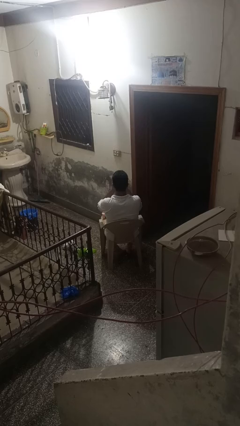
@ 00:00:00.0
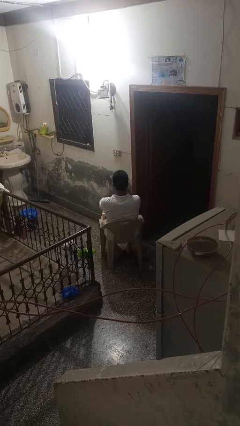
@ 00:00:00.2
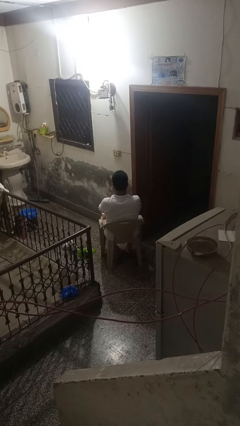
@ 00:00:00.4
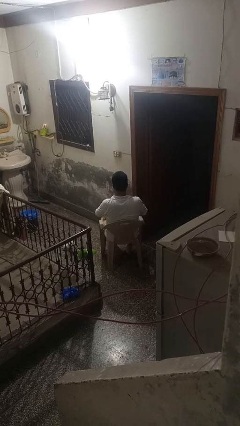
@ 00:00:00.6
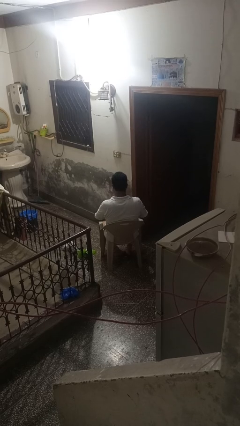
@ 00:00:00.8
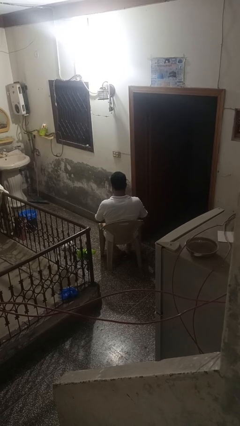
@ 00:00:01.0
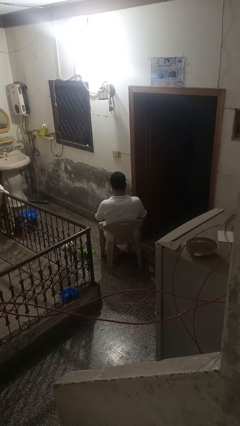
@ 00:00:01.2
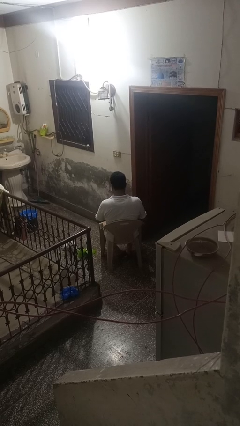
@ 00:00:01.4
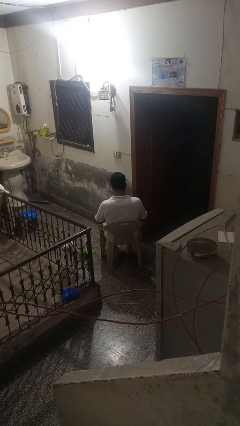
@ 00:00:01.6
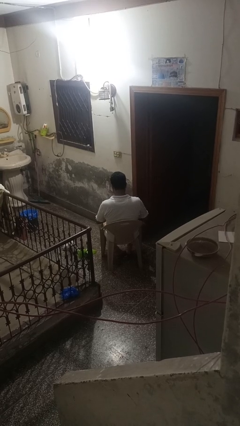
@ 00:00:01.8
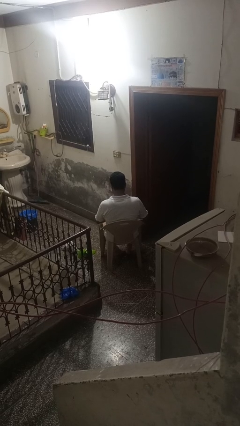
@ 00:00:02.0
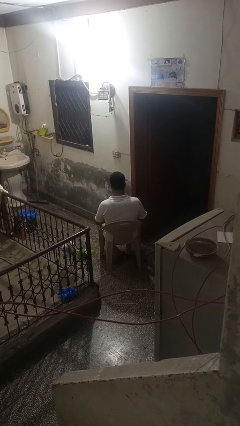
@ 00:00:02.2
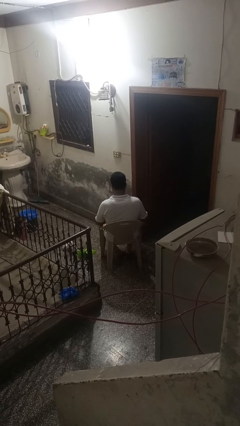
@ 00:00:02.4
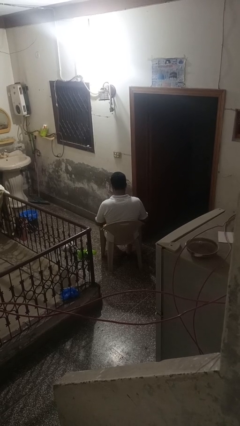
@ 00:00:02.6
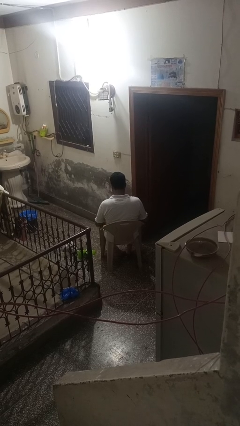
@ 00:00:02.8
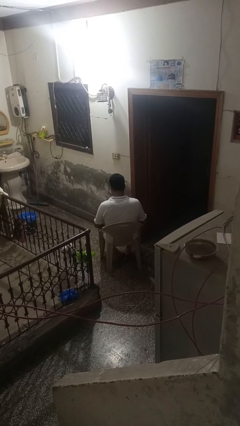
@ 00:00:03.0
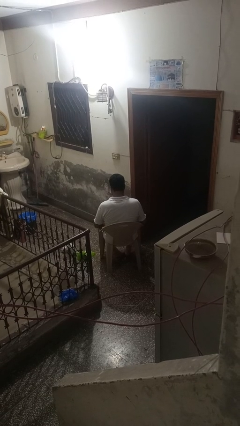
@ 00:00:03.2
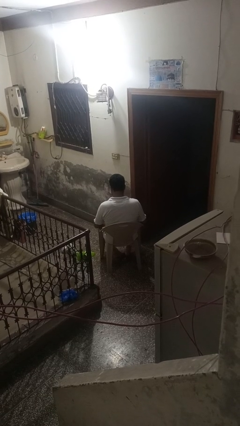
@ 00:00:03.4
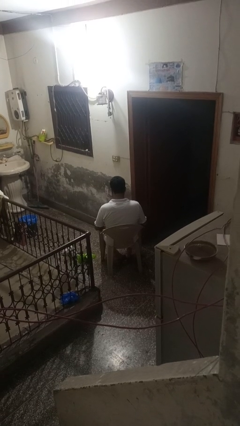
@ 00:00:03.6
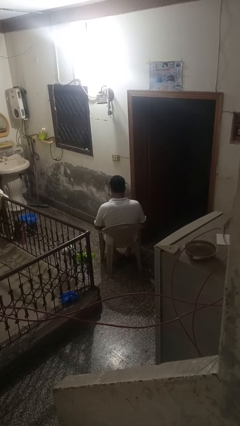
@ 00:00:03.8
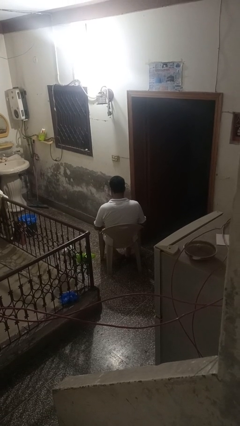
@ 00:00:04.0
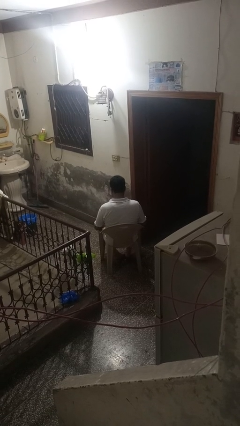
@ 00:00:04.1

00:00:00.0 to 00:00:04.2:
person dries hands with towel

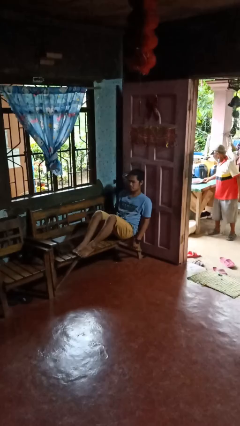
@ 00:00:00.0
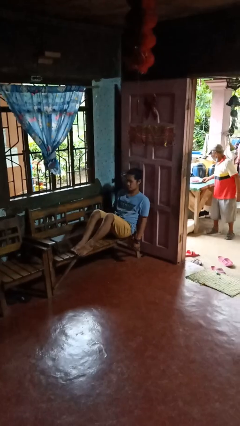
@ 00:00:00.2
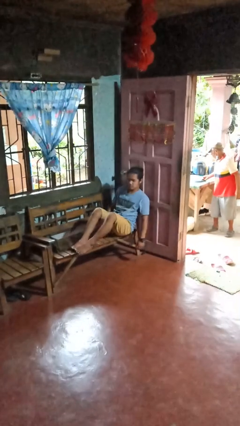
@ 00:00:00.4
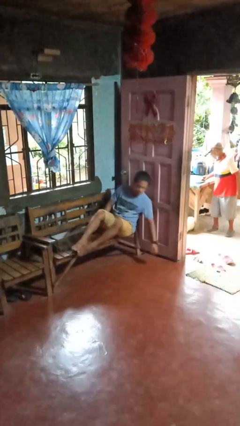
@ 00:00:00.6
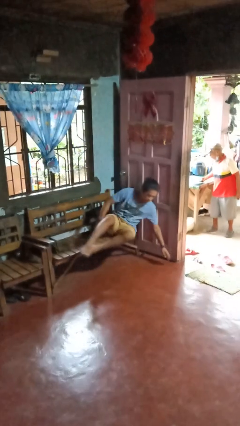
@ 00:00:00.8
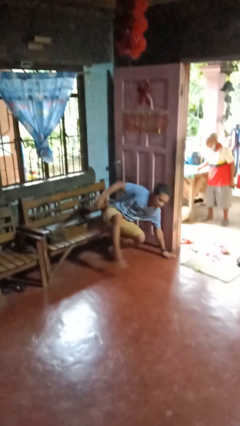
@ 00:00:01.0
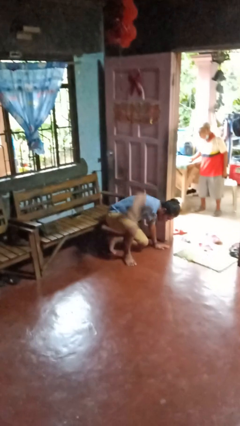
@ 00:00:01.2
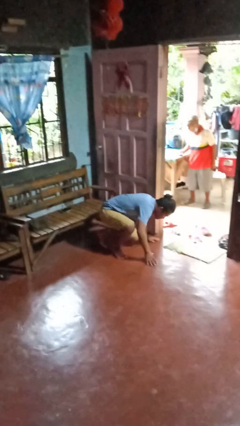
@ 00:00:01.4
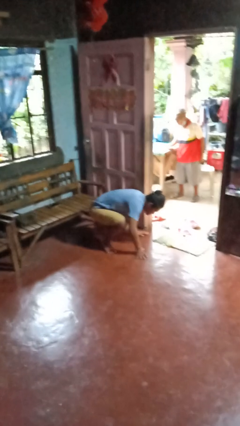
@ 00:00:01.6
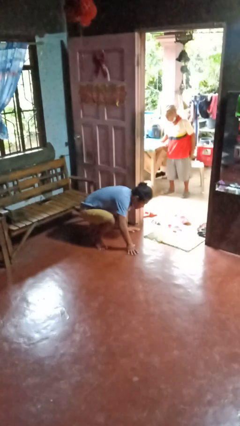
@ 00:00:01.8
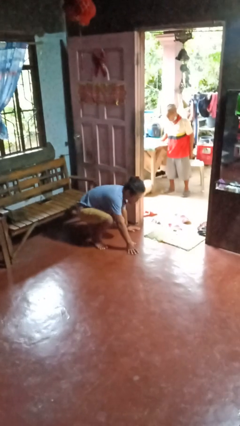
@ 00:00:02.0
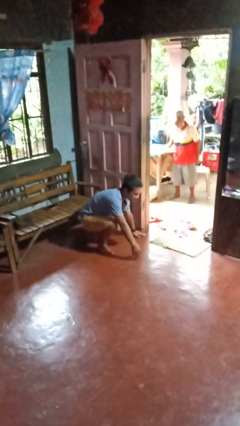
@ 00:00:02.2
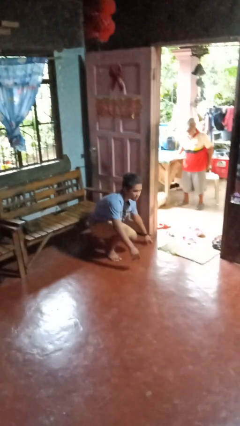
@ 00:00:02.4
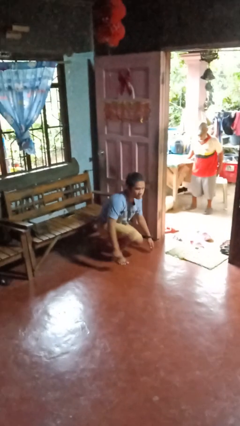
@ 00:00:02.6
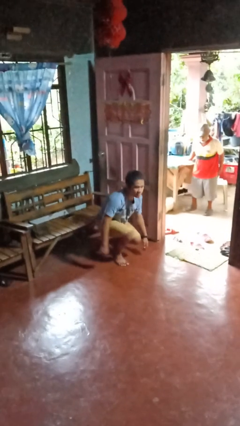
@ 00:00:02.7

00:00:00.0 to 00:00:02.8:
person falls from chair

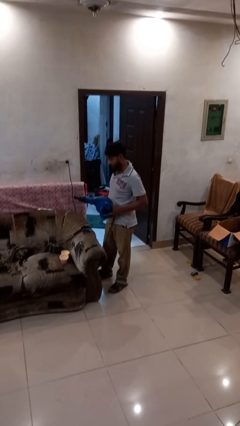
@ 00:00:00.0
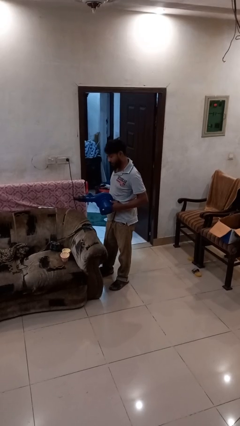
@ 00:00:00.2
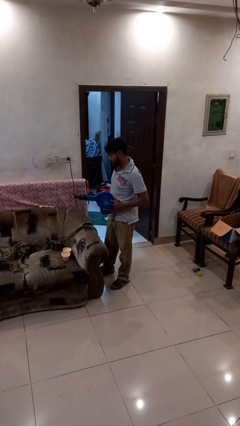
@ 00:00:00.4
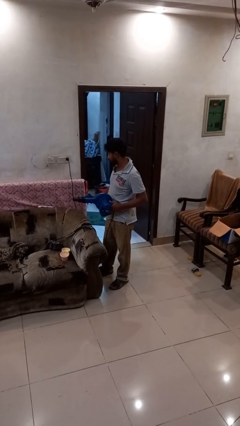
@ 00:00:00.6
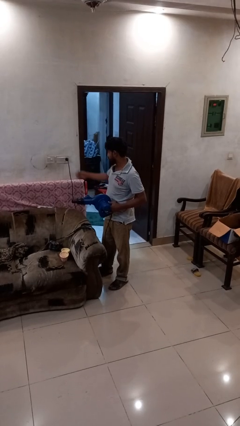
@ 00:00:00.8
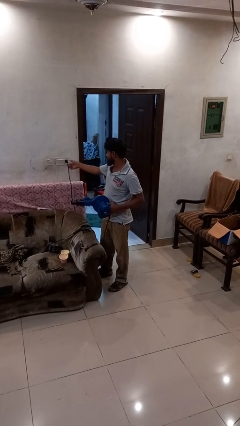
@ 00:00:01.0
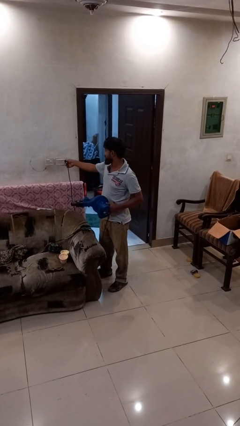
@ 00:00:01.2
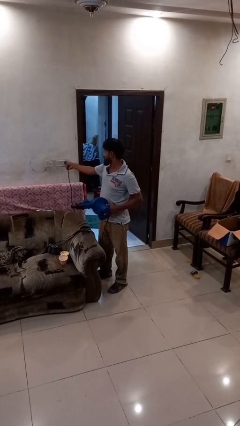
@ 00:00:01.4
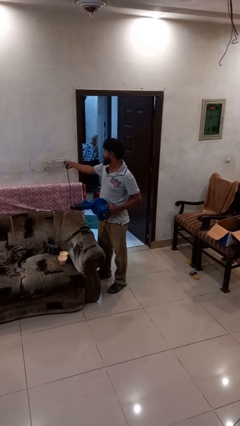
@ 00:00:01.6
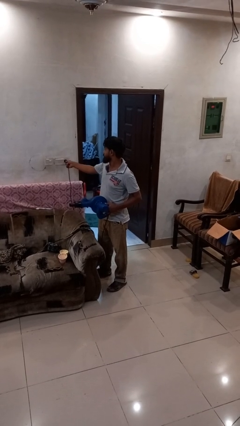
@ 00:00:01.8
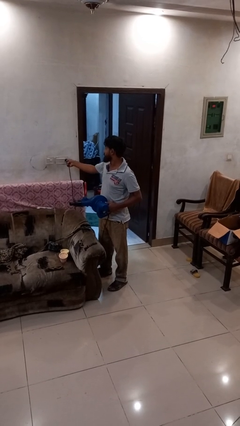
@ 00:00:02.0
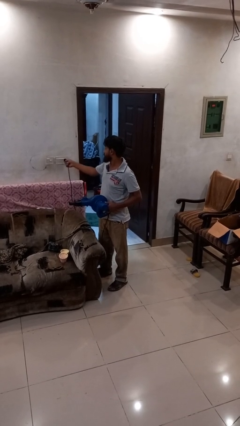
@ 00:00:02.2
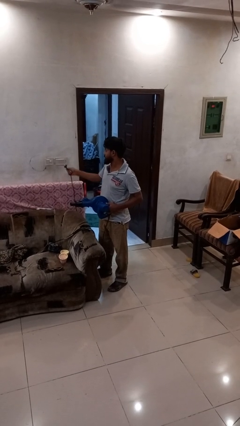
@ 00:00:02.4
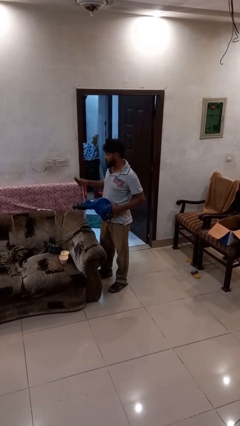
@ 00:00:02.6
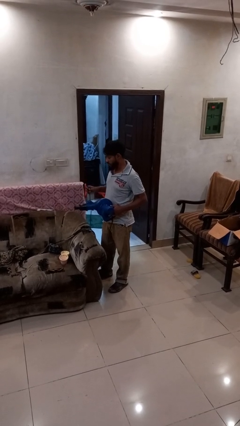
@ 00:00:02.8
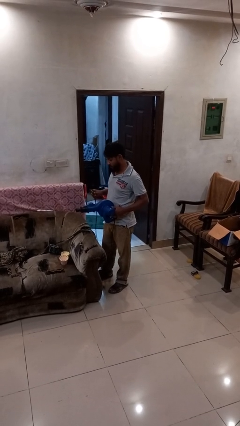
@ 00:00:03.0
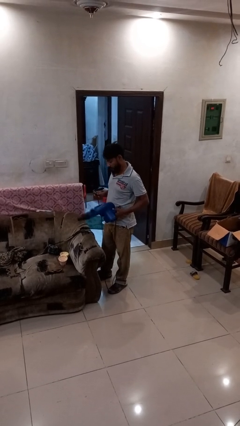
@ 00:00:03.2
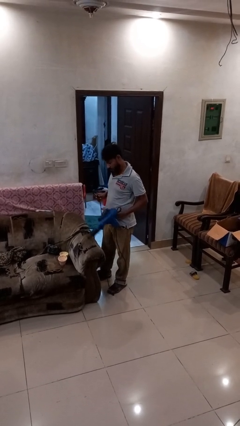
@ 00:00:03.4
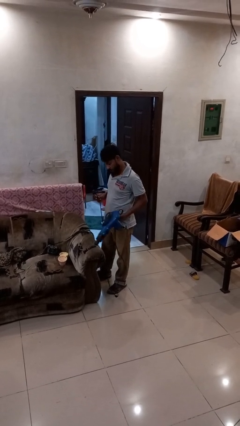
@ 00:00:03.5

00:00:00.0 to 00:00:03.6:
person unplugs from electrical socket

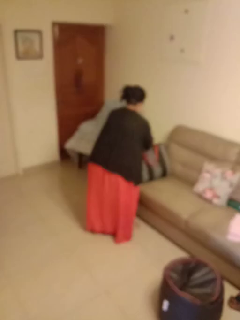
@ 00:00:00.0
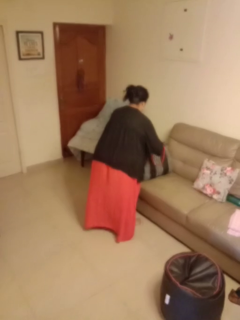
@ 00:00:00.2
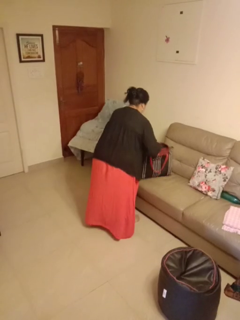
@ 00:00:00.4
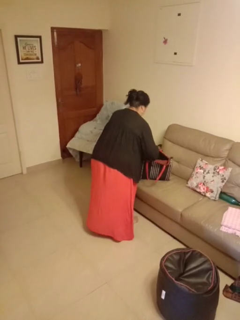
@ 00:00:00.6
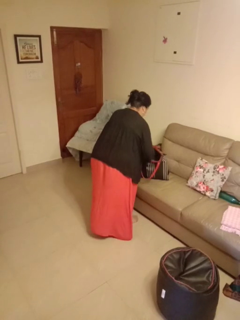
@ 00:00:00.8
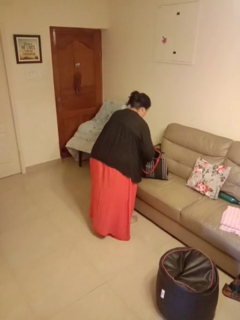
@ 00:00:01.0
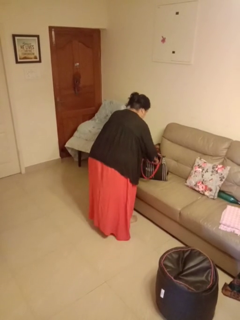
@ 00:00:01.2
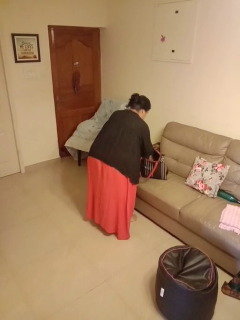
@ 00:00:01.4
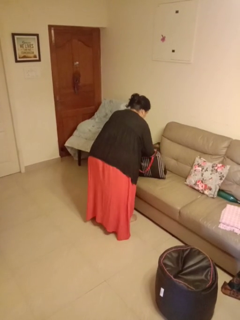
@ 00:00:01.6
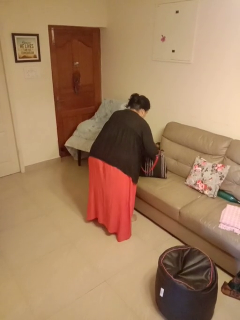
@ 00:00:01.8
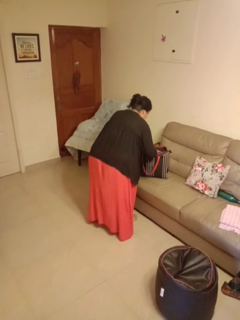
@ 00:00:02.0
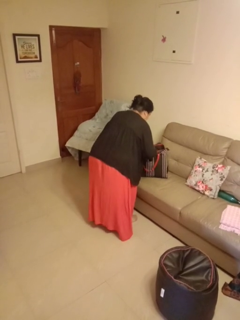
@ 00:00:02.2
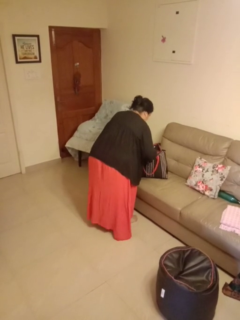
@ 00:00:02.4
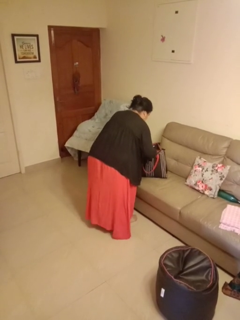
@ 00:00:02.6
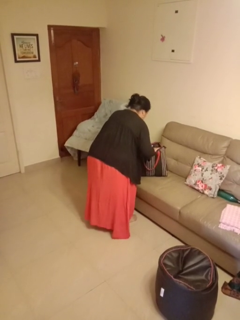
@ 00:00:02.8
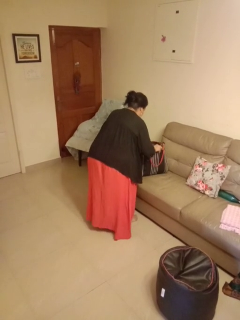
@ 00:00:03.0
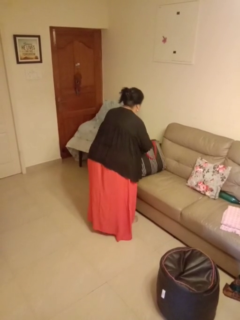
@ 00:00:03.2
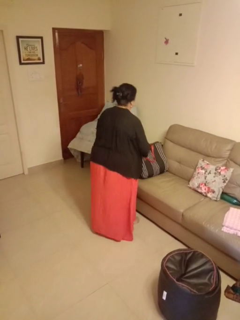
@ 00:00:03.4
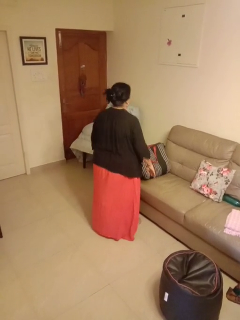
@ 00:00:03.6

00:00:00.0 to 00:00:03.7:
person searches in bag

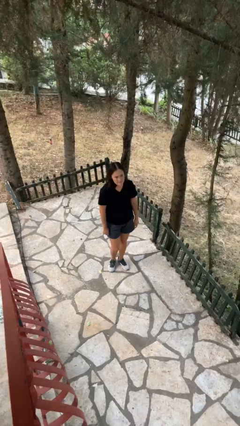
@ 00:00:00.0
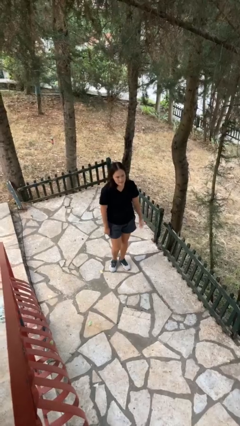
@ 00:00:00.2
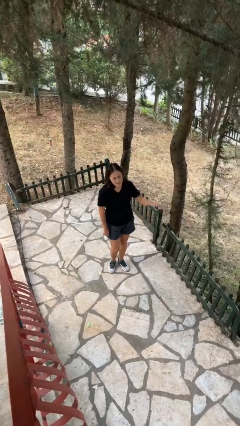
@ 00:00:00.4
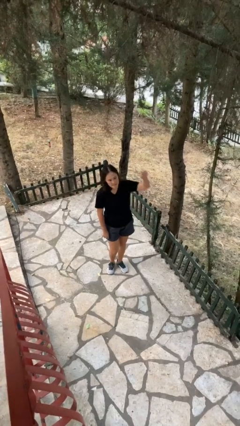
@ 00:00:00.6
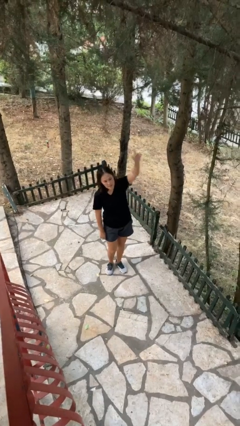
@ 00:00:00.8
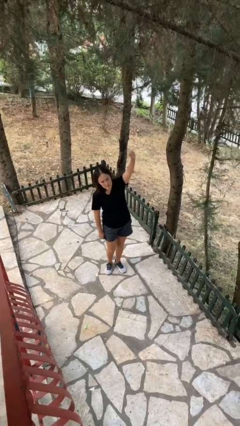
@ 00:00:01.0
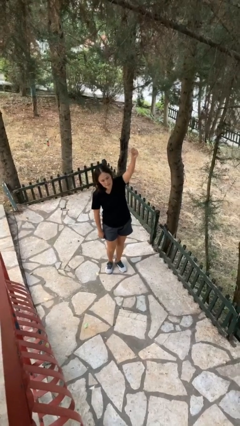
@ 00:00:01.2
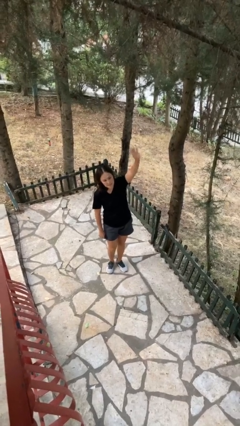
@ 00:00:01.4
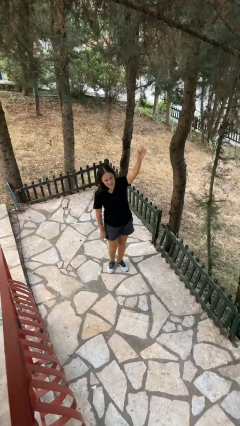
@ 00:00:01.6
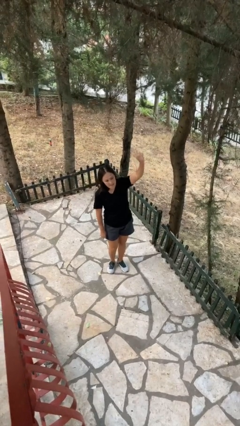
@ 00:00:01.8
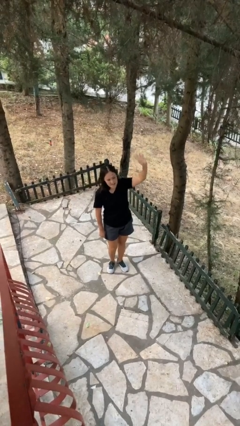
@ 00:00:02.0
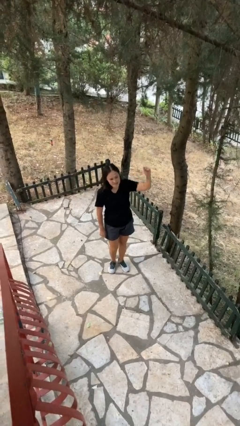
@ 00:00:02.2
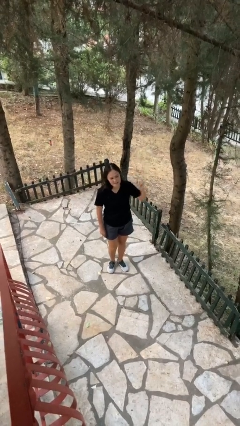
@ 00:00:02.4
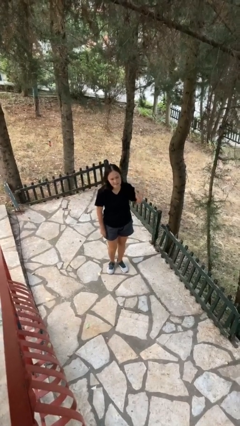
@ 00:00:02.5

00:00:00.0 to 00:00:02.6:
person gestures raise hand

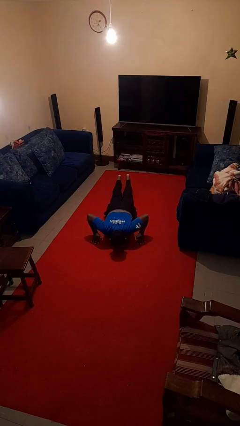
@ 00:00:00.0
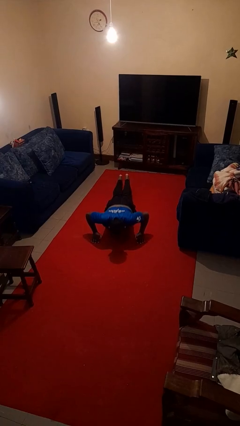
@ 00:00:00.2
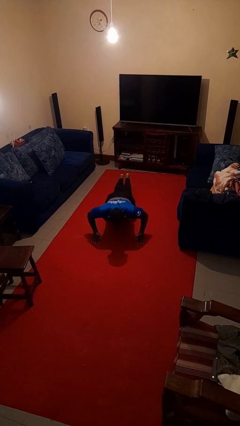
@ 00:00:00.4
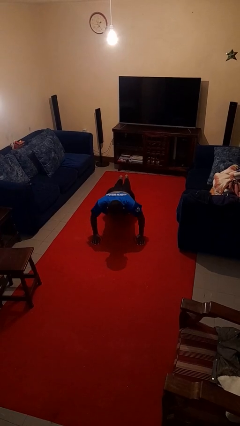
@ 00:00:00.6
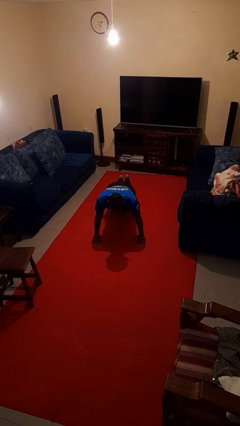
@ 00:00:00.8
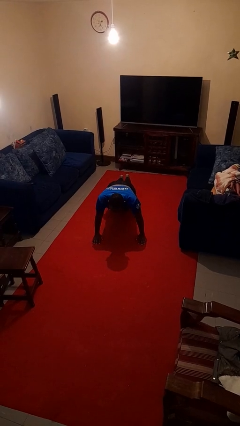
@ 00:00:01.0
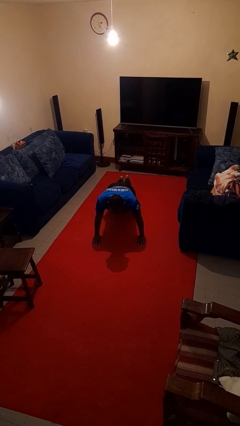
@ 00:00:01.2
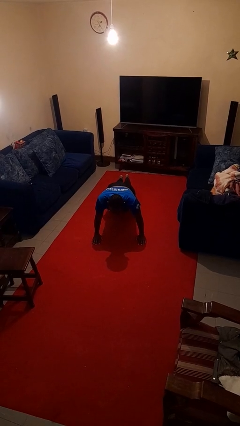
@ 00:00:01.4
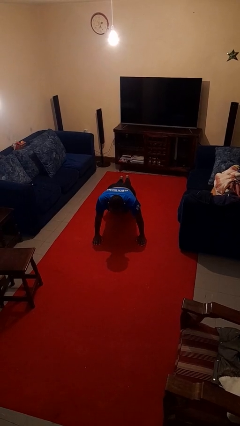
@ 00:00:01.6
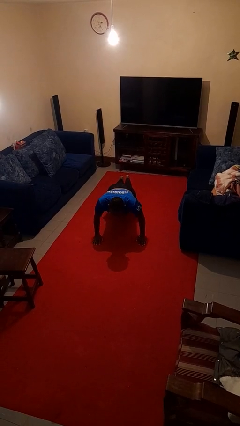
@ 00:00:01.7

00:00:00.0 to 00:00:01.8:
person exercises with pushup
